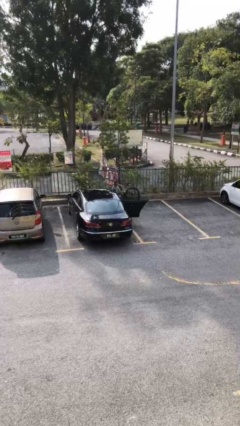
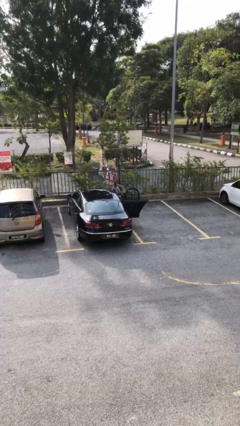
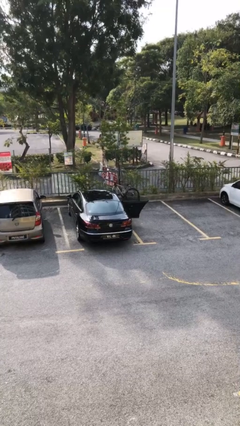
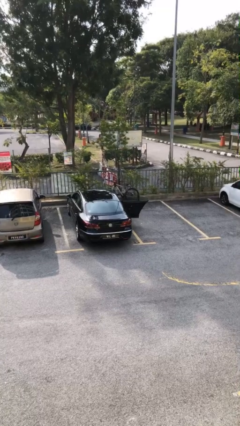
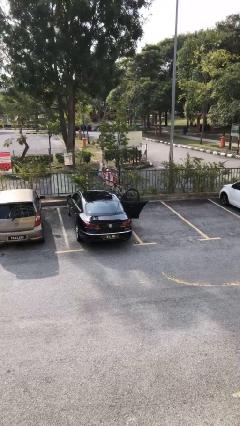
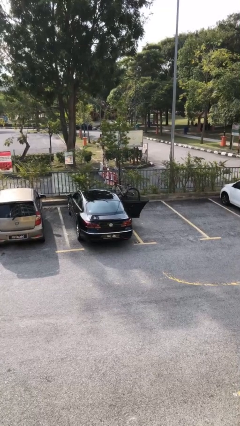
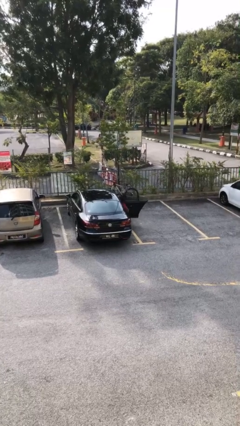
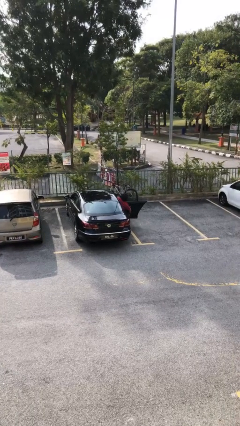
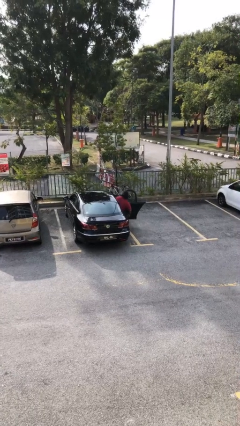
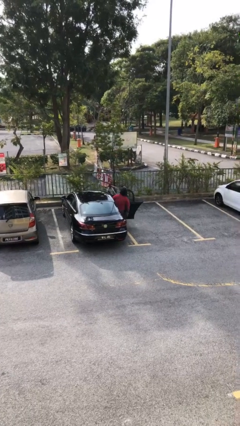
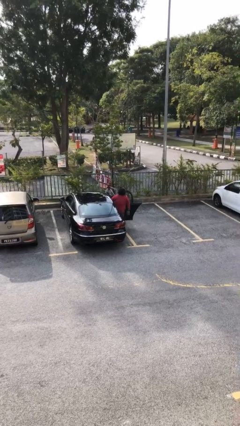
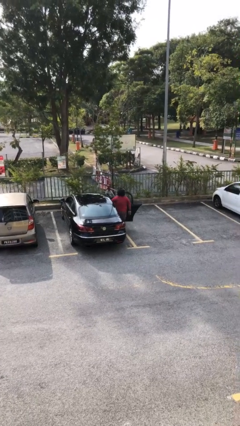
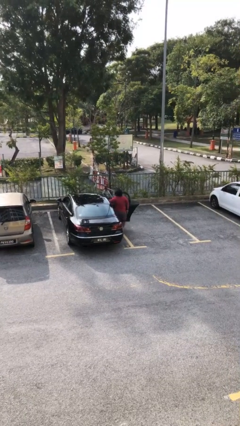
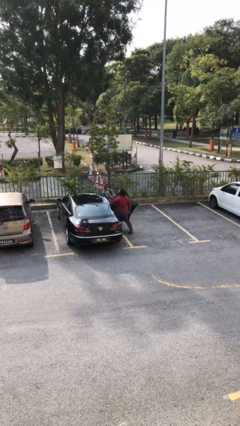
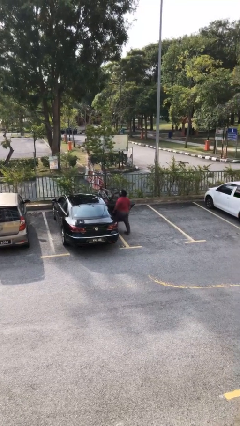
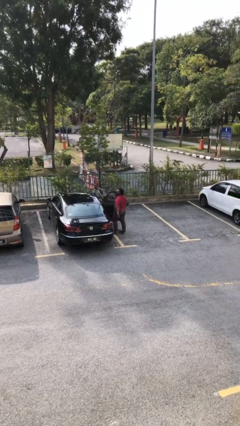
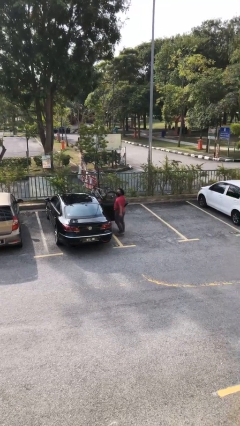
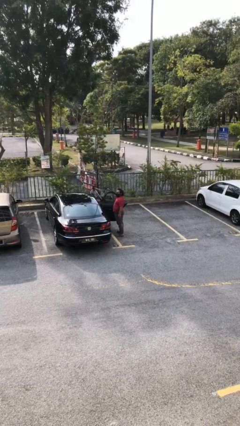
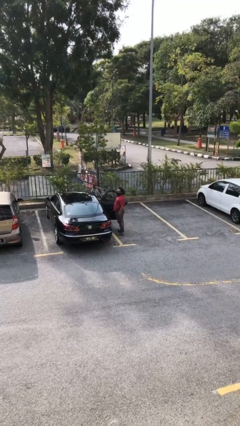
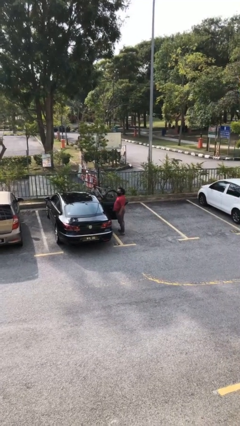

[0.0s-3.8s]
person exits car

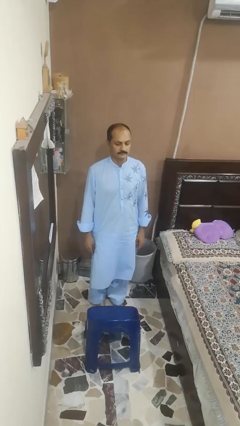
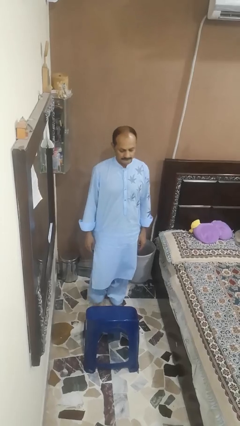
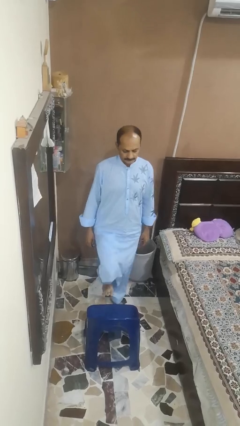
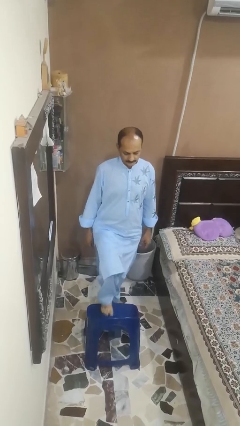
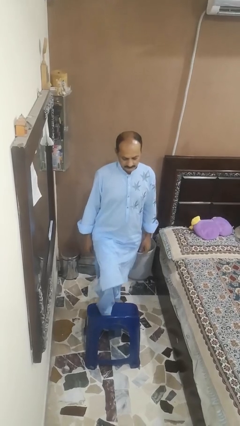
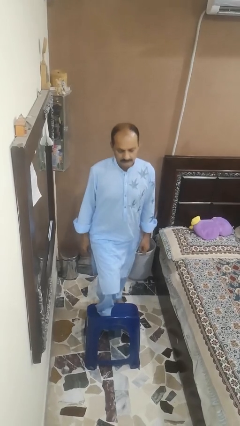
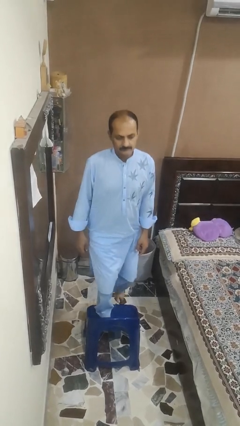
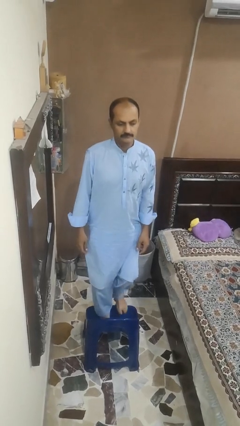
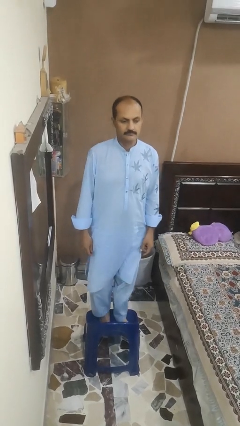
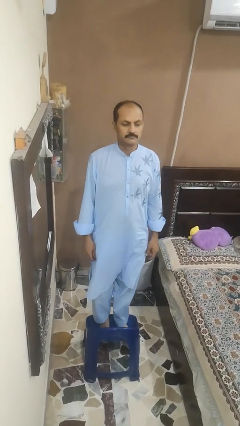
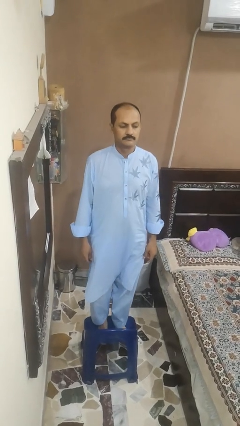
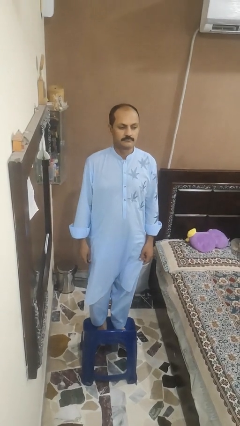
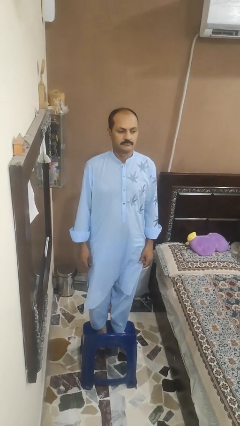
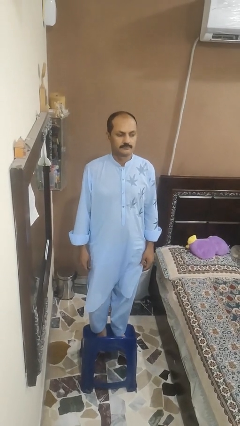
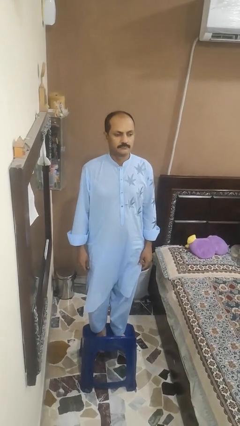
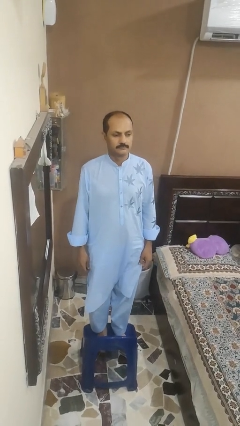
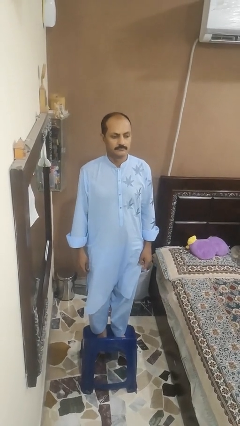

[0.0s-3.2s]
person climbs on chair

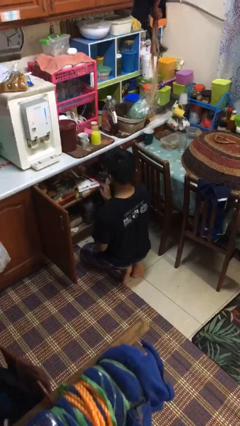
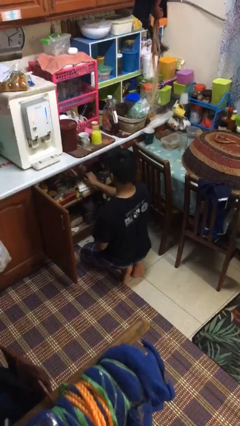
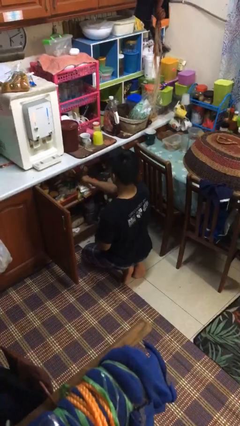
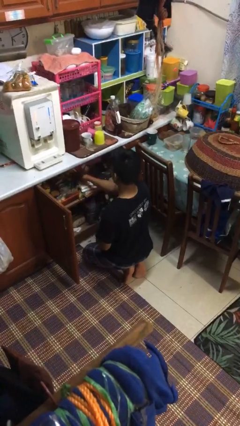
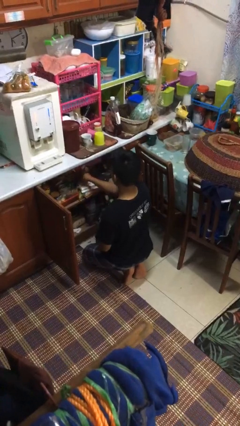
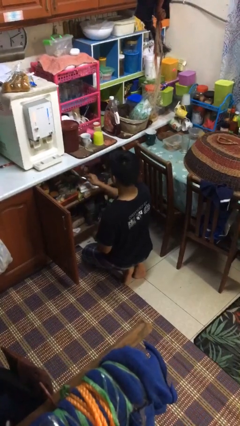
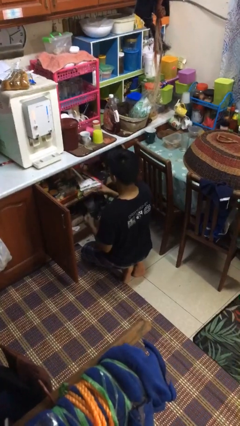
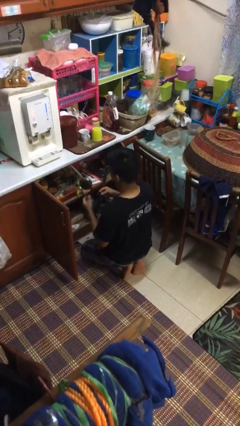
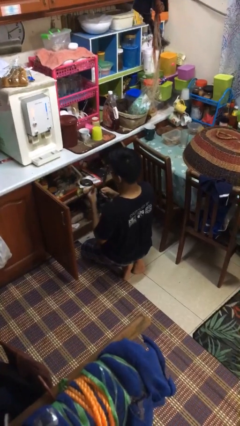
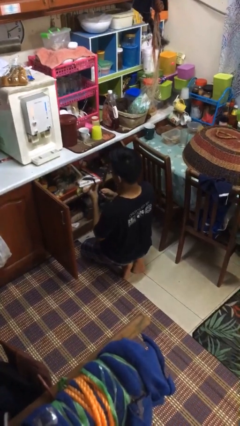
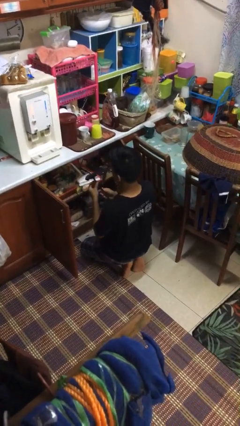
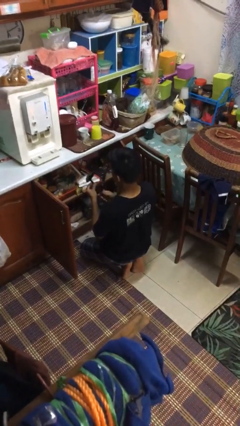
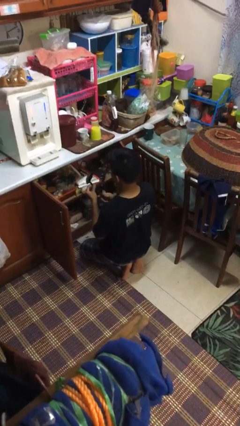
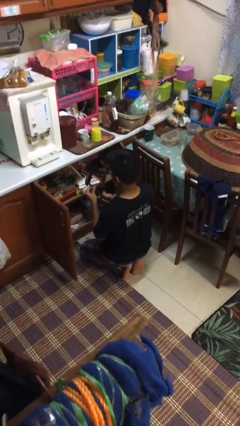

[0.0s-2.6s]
person takes object from kitchen drawer

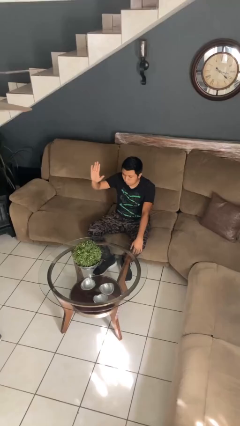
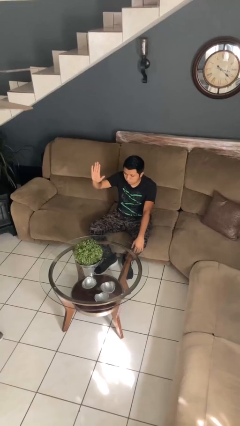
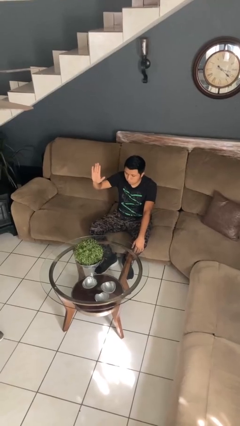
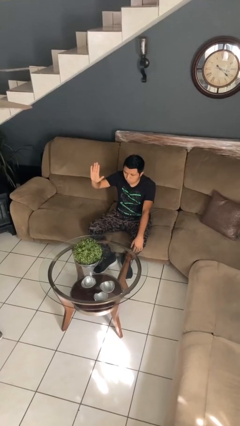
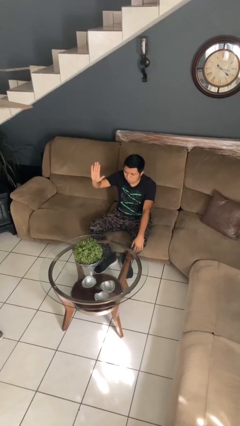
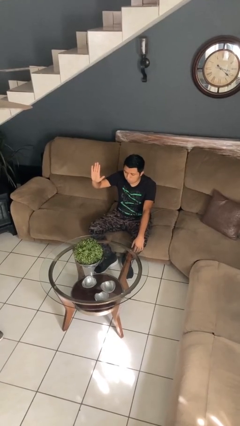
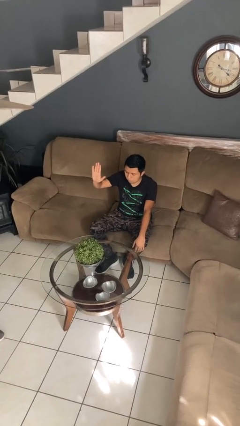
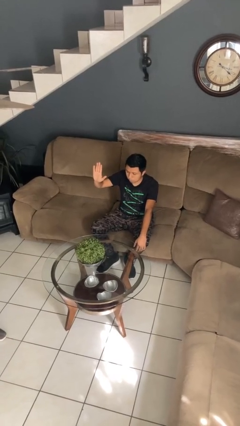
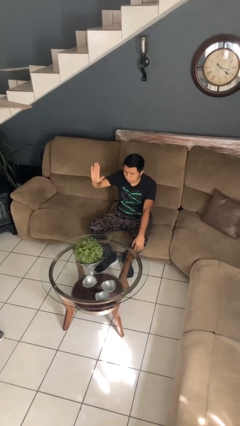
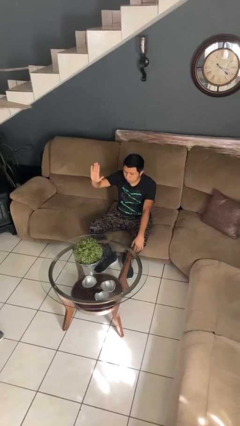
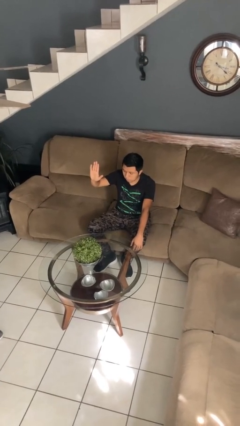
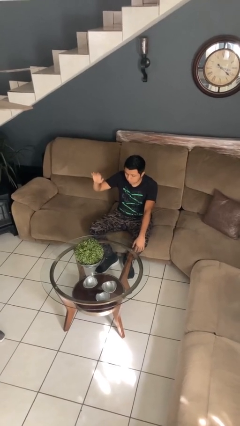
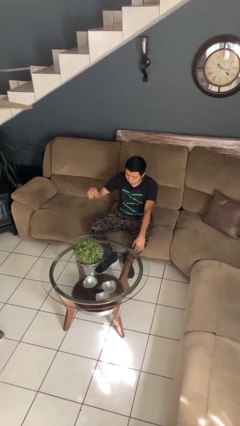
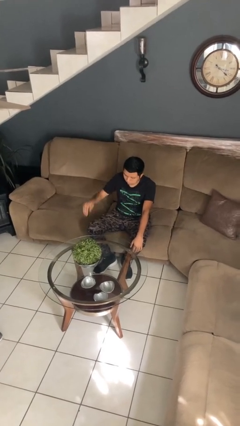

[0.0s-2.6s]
person gestures stop

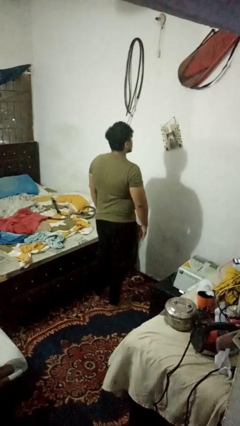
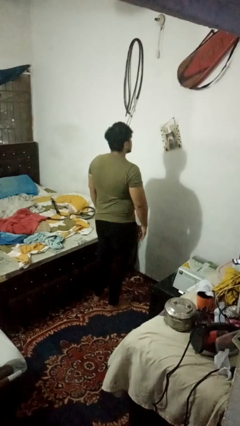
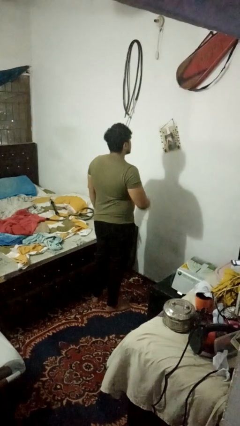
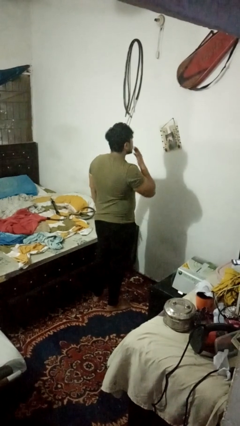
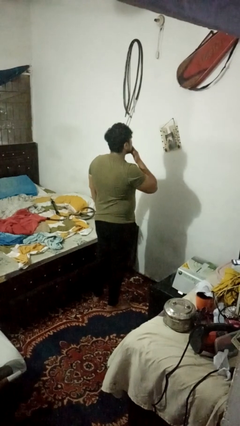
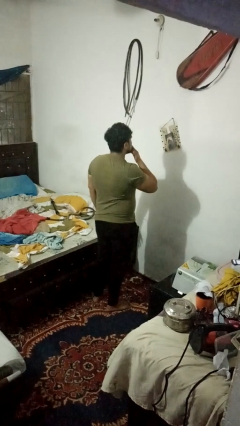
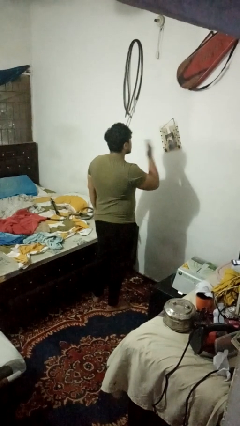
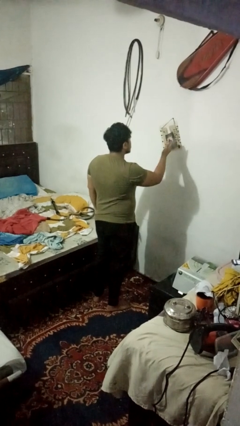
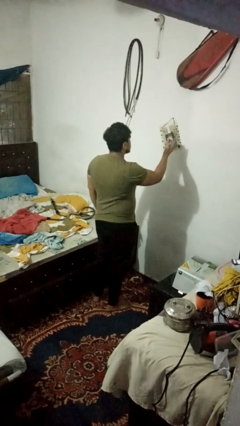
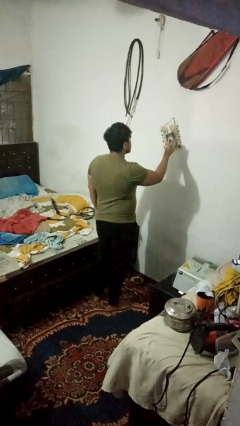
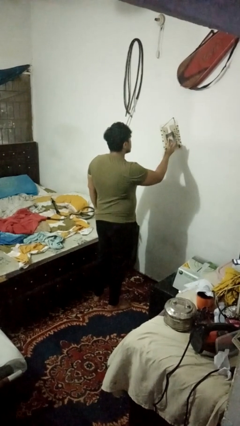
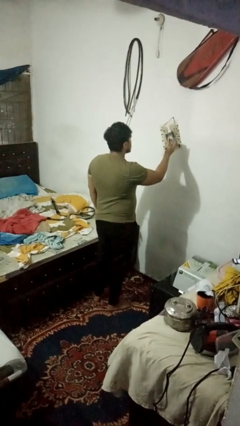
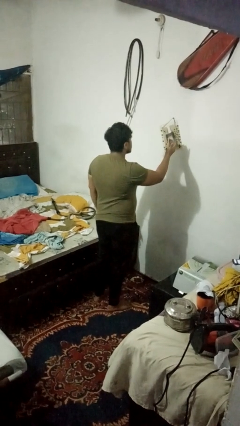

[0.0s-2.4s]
person gestures blow kiss

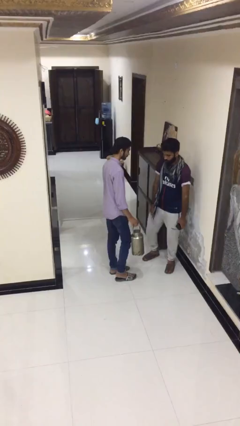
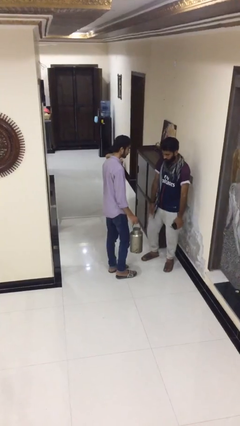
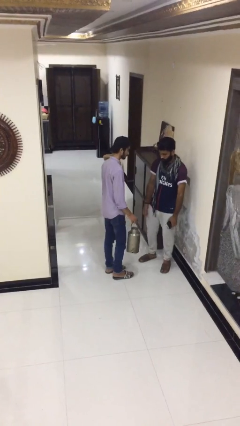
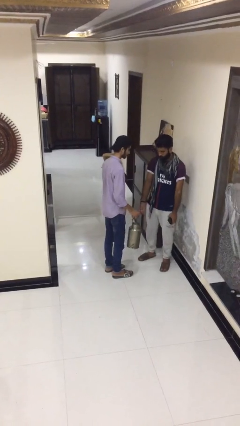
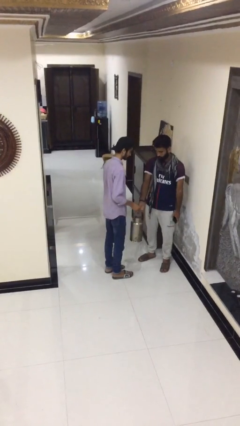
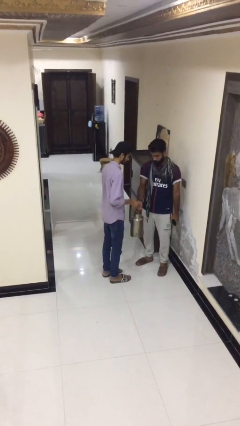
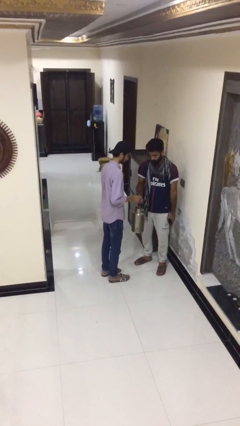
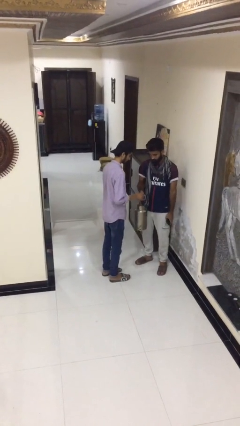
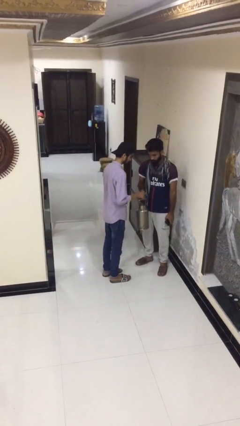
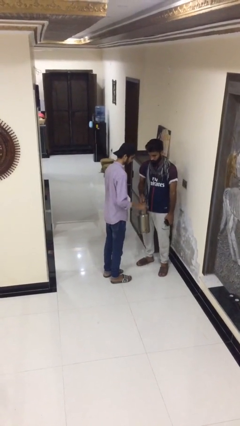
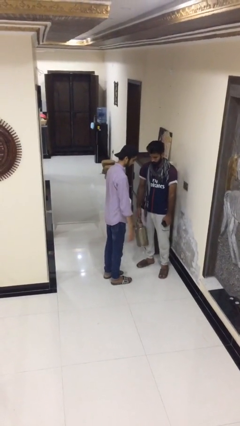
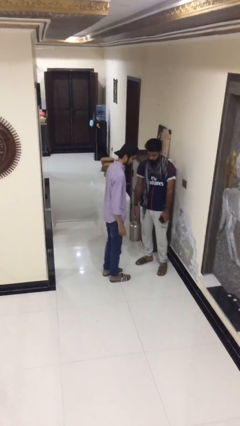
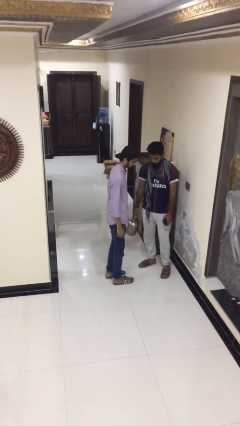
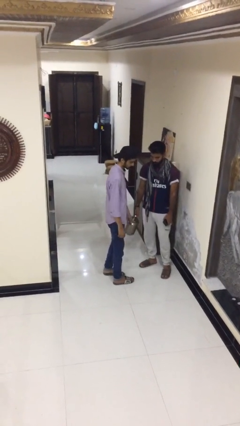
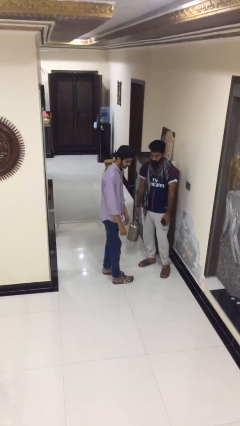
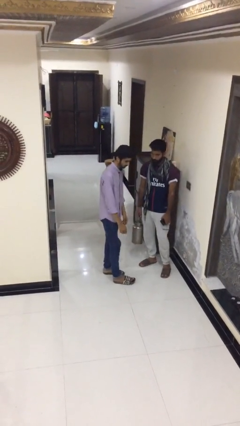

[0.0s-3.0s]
person transfers object to person
